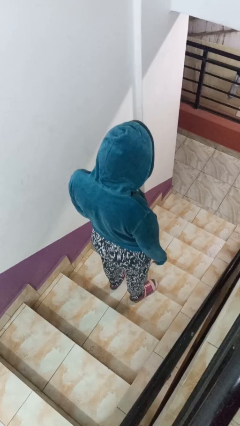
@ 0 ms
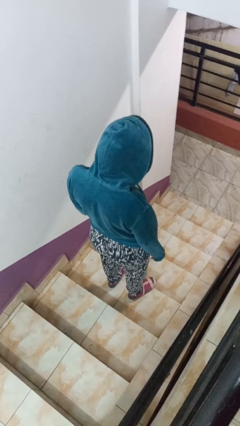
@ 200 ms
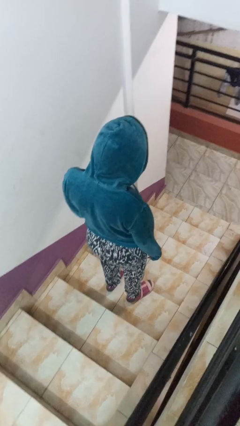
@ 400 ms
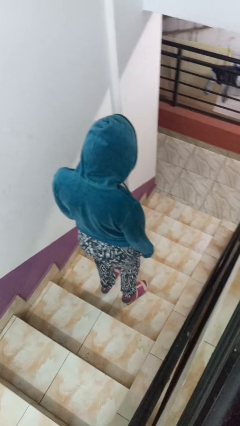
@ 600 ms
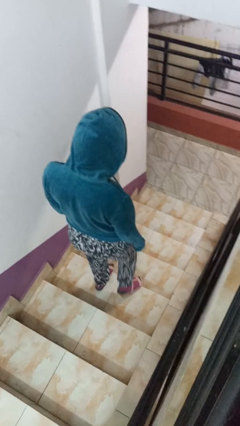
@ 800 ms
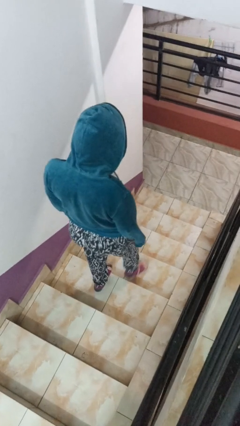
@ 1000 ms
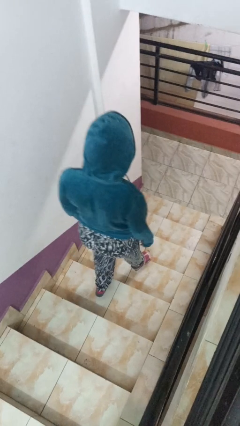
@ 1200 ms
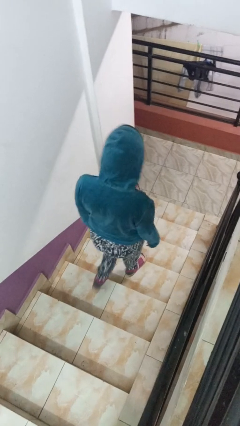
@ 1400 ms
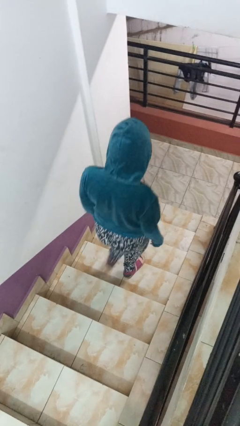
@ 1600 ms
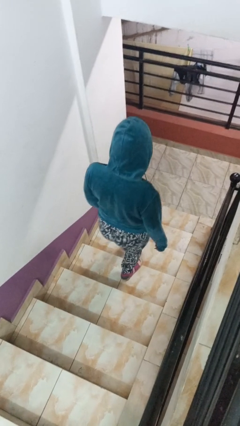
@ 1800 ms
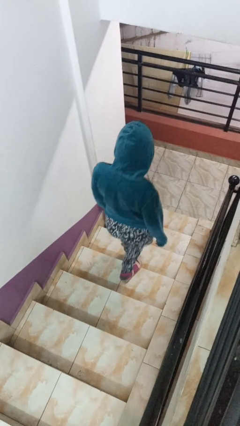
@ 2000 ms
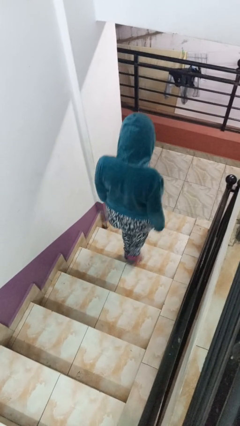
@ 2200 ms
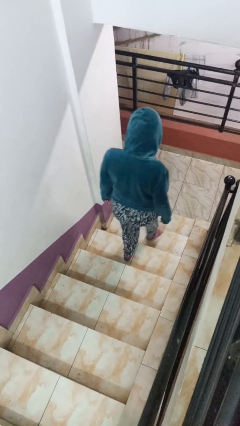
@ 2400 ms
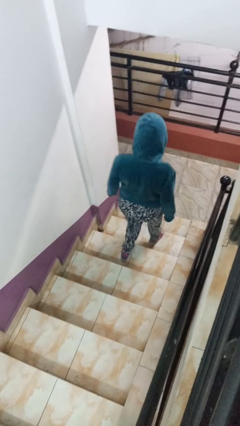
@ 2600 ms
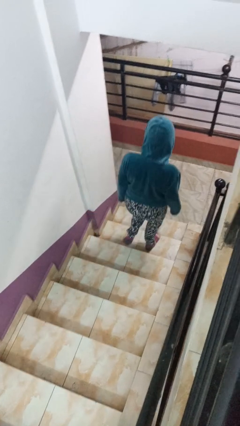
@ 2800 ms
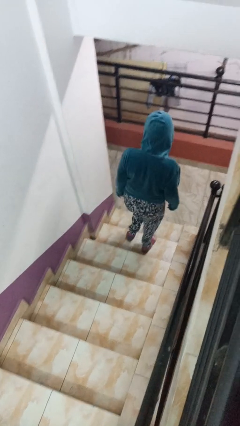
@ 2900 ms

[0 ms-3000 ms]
person climbs down stairs

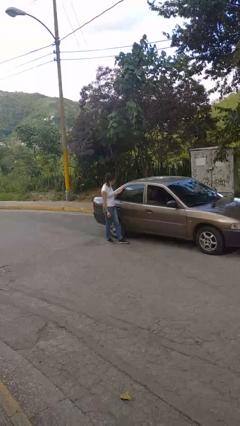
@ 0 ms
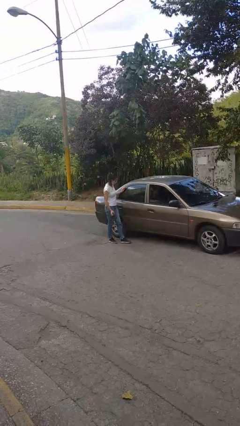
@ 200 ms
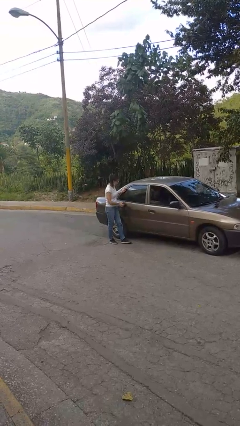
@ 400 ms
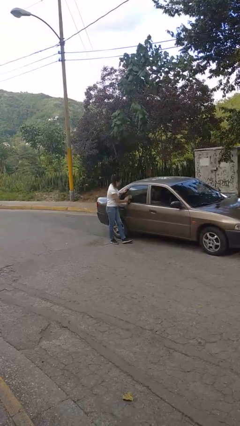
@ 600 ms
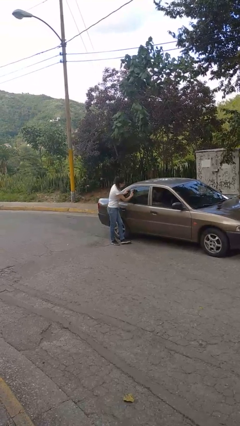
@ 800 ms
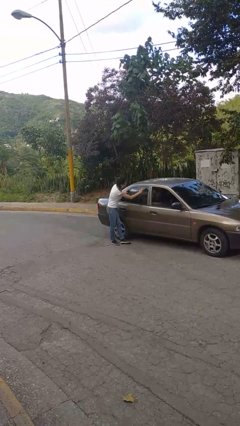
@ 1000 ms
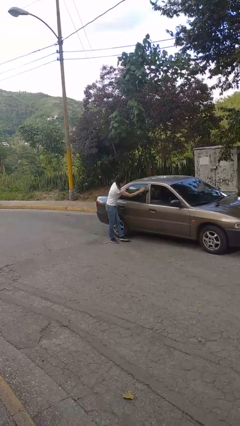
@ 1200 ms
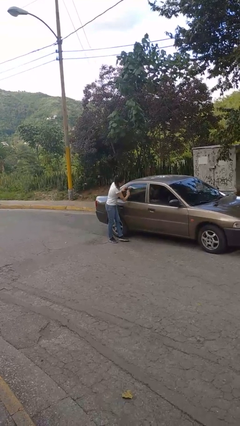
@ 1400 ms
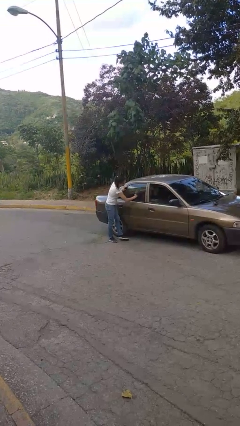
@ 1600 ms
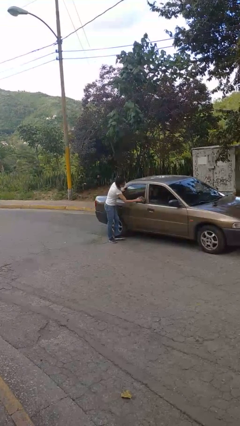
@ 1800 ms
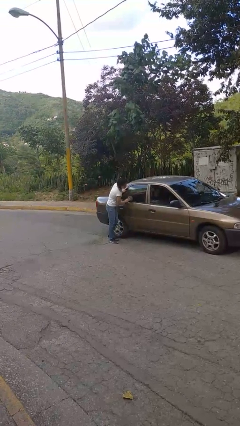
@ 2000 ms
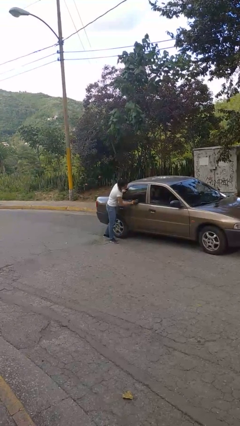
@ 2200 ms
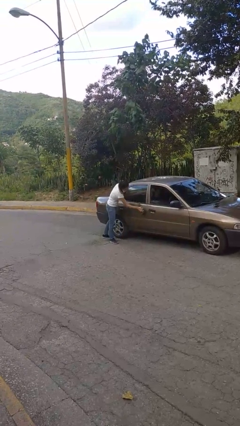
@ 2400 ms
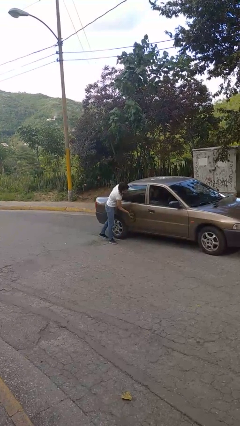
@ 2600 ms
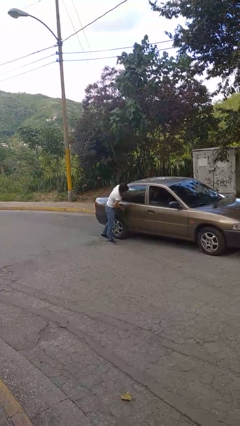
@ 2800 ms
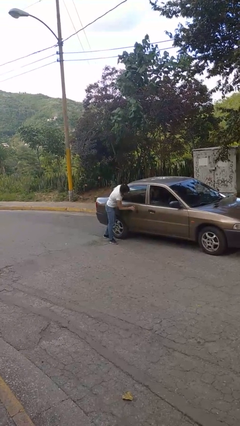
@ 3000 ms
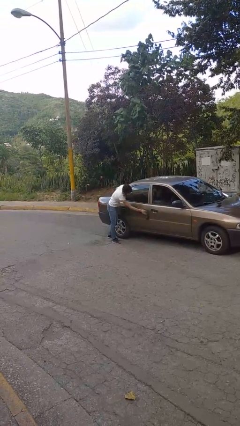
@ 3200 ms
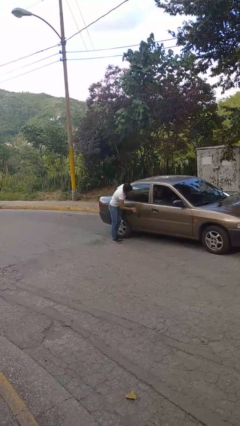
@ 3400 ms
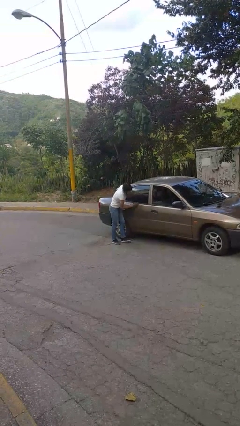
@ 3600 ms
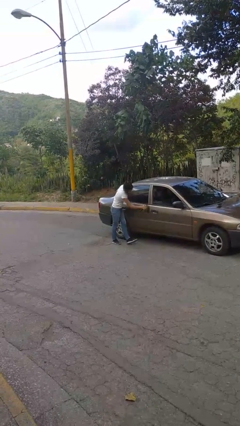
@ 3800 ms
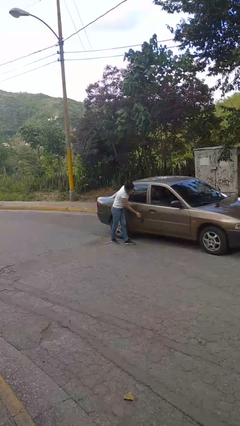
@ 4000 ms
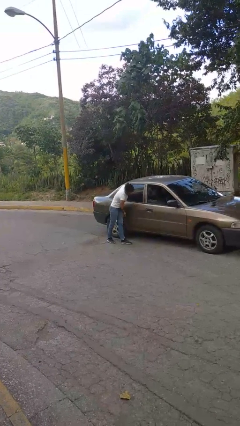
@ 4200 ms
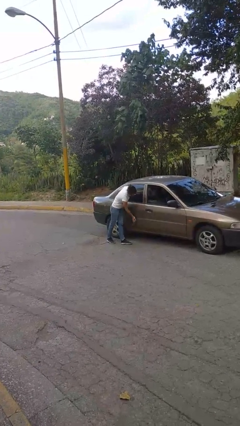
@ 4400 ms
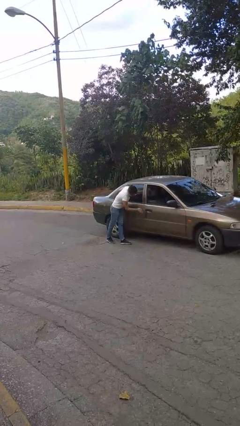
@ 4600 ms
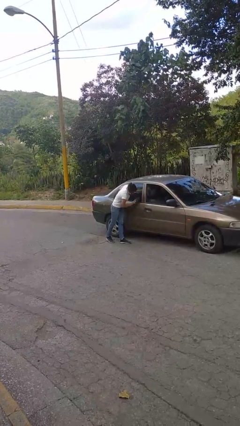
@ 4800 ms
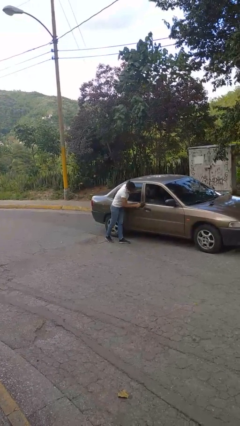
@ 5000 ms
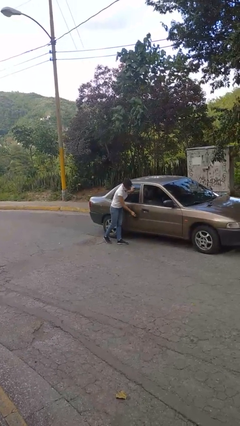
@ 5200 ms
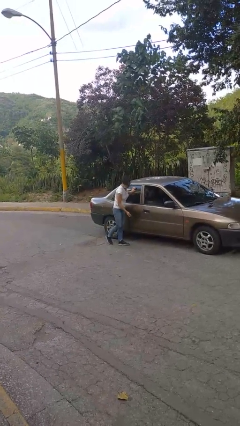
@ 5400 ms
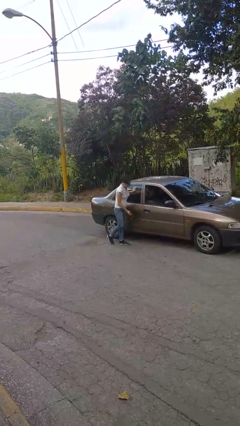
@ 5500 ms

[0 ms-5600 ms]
person polishes car with rag

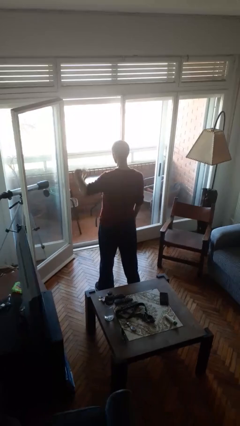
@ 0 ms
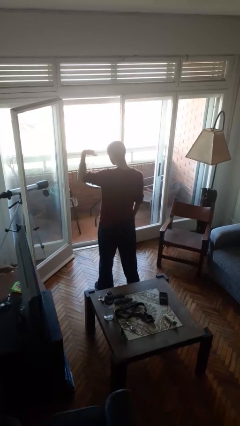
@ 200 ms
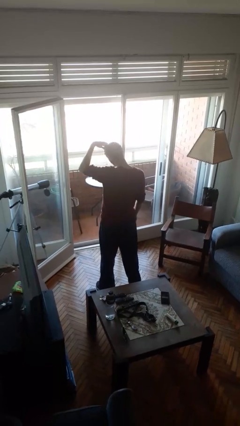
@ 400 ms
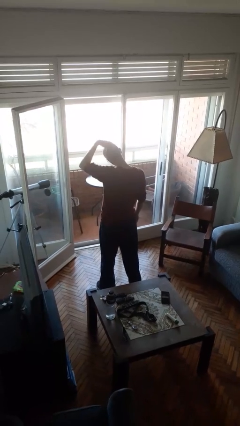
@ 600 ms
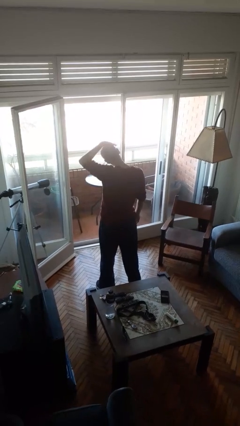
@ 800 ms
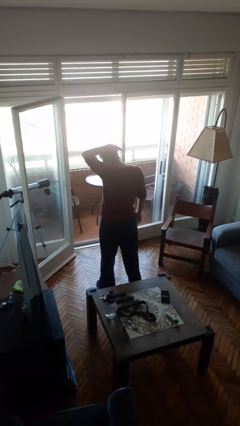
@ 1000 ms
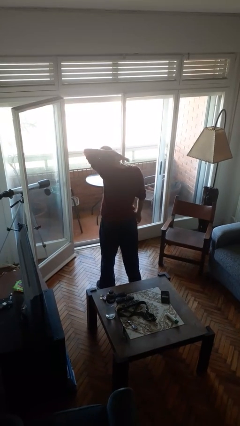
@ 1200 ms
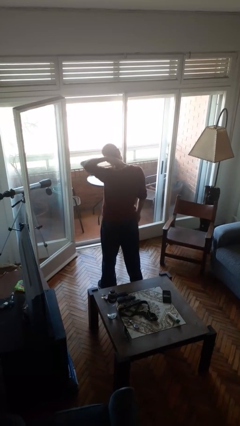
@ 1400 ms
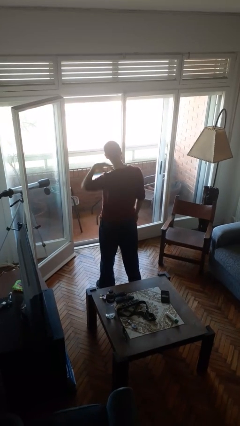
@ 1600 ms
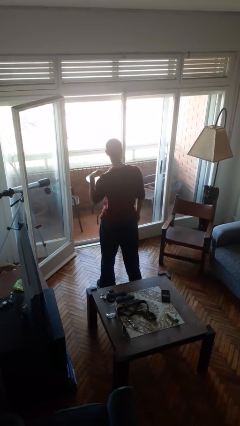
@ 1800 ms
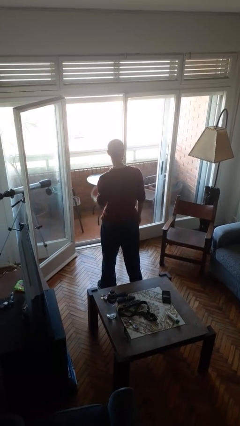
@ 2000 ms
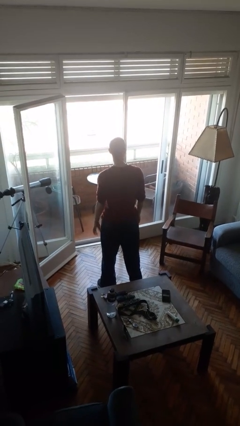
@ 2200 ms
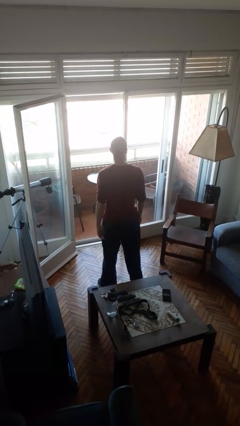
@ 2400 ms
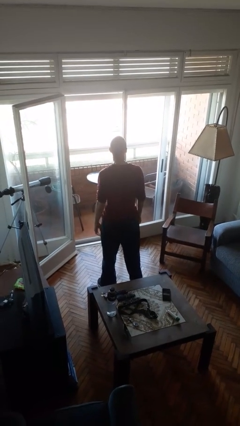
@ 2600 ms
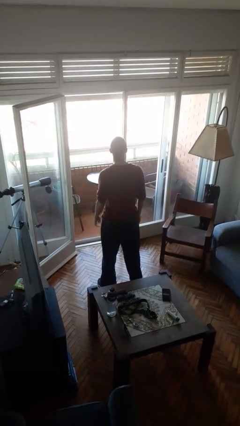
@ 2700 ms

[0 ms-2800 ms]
person puts on necklace

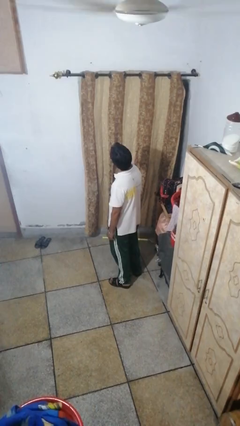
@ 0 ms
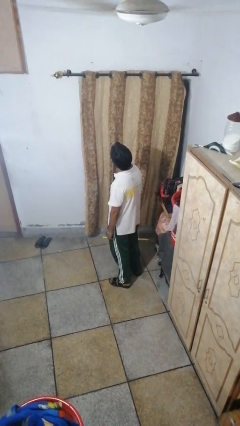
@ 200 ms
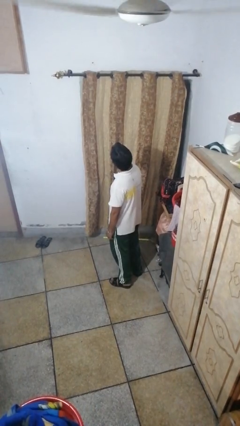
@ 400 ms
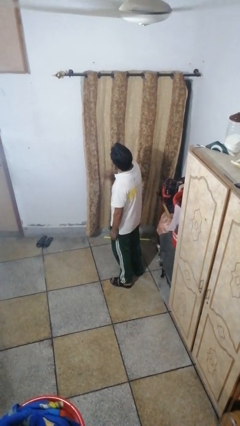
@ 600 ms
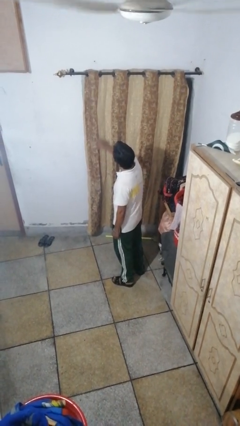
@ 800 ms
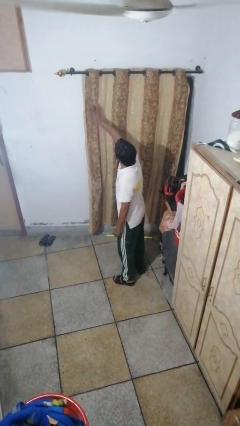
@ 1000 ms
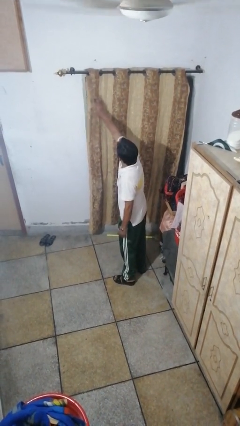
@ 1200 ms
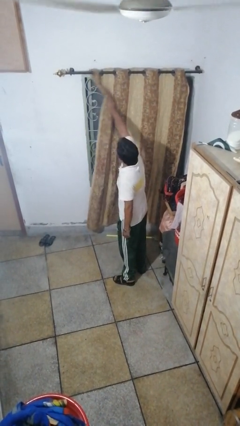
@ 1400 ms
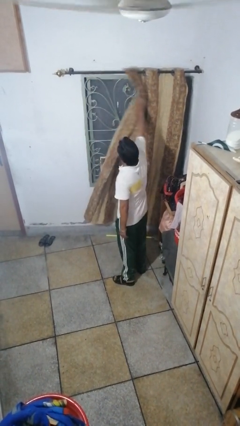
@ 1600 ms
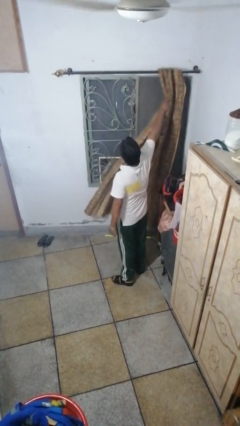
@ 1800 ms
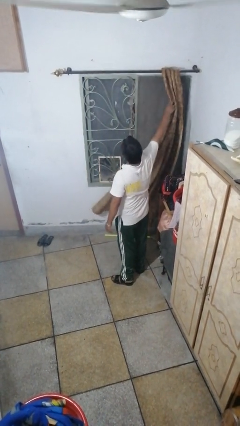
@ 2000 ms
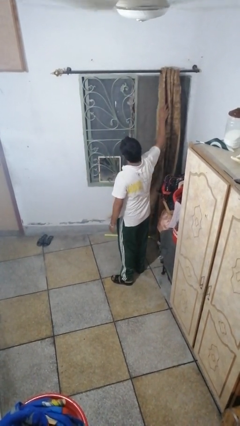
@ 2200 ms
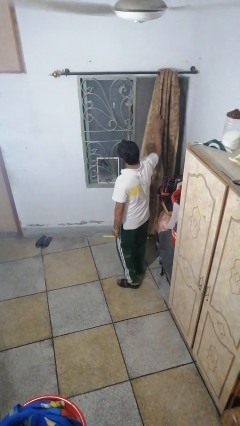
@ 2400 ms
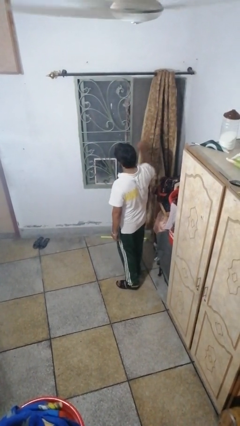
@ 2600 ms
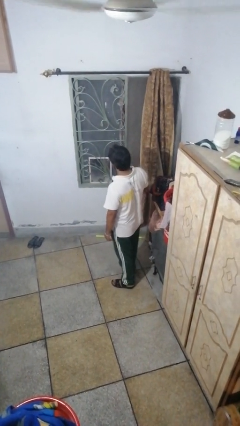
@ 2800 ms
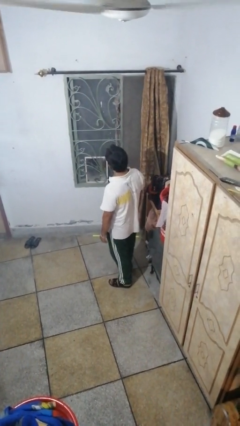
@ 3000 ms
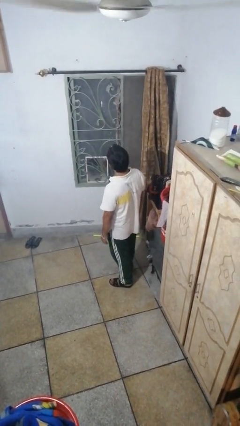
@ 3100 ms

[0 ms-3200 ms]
person opens curtains

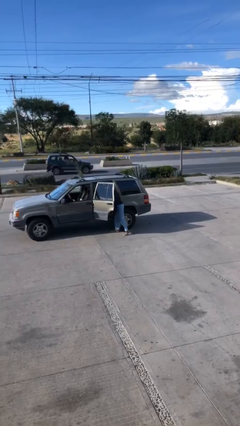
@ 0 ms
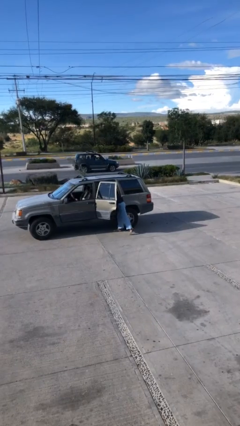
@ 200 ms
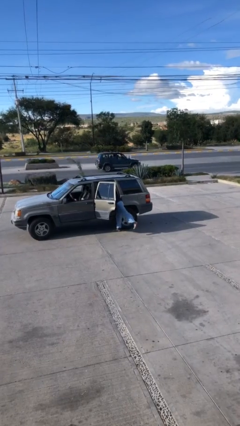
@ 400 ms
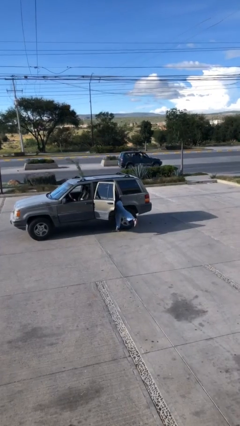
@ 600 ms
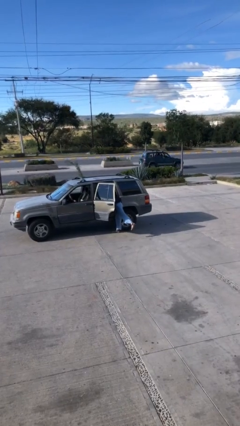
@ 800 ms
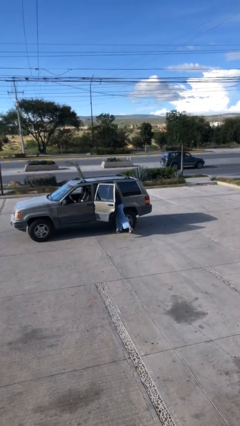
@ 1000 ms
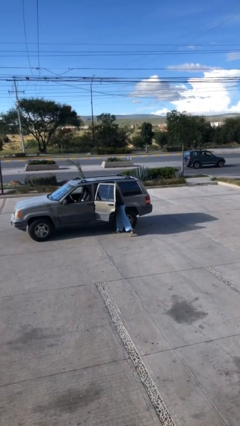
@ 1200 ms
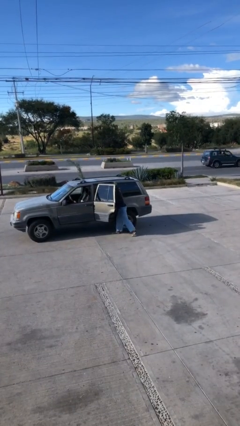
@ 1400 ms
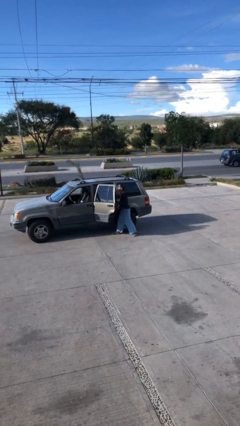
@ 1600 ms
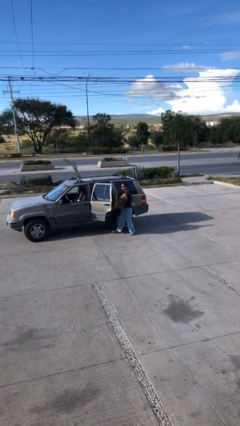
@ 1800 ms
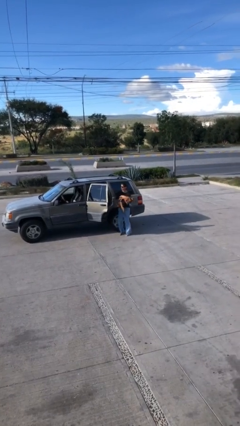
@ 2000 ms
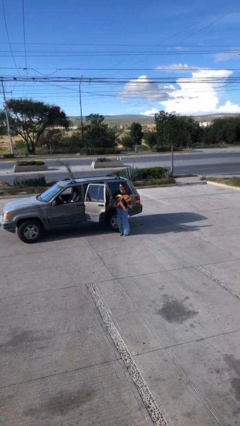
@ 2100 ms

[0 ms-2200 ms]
person unloads car

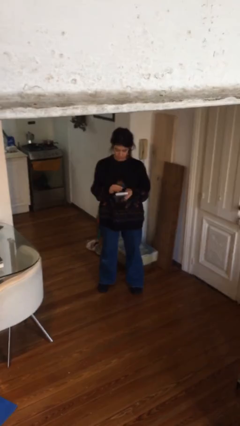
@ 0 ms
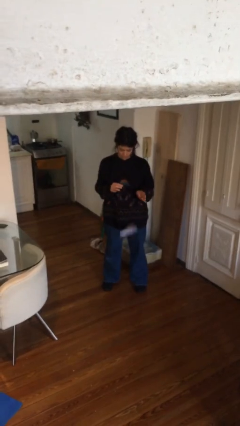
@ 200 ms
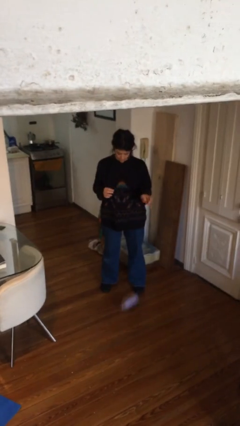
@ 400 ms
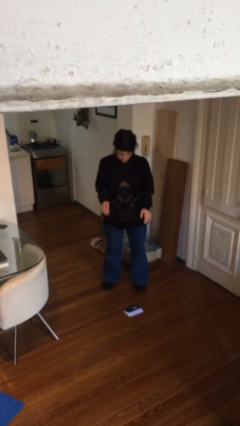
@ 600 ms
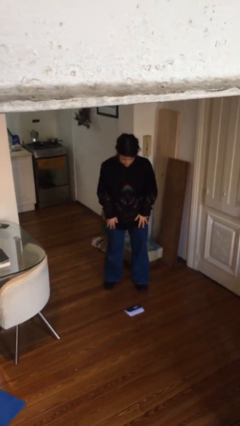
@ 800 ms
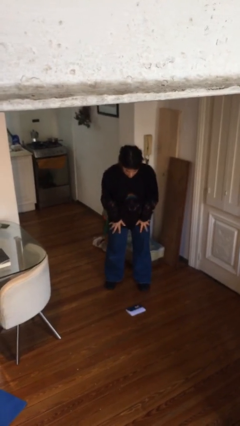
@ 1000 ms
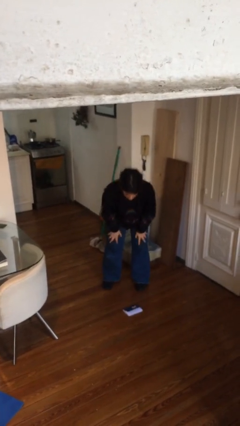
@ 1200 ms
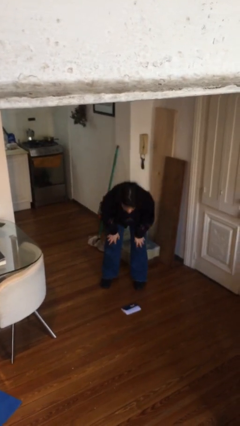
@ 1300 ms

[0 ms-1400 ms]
person drops object
